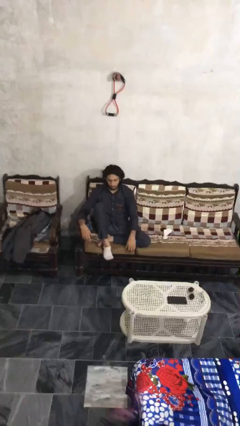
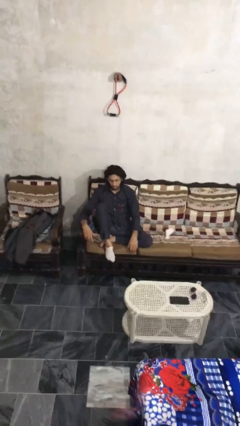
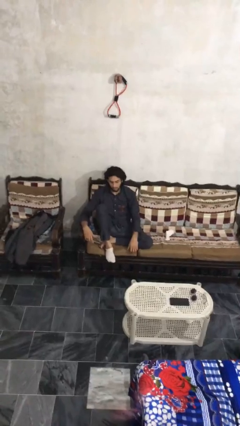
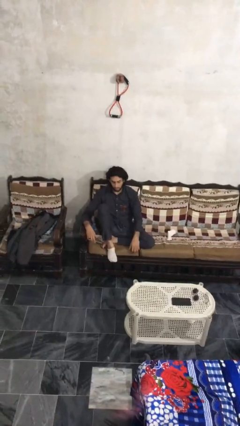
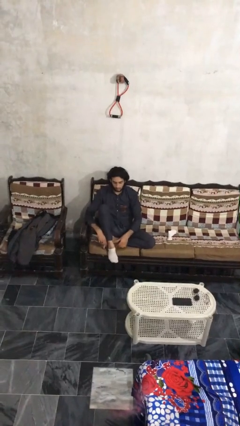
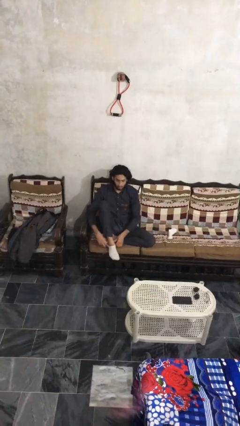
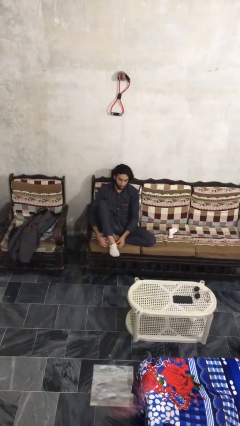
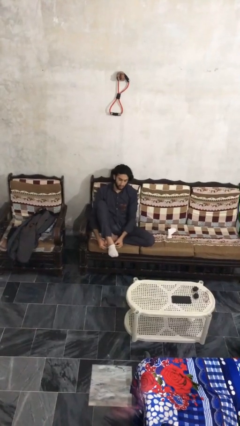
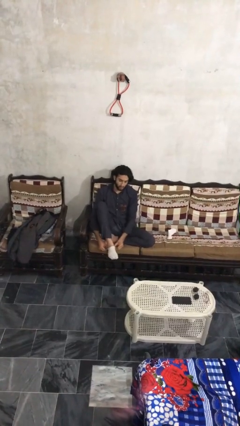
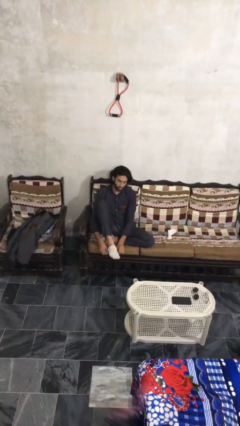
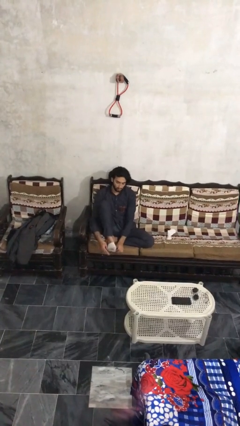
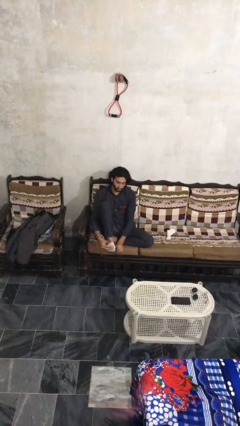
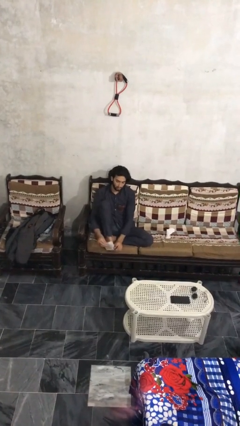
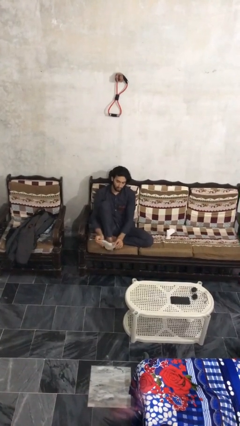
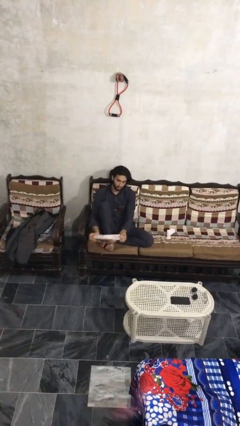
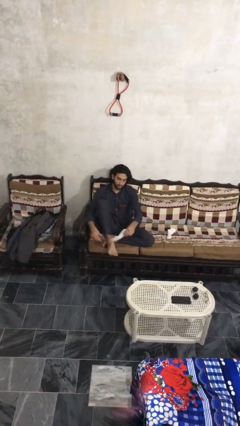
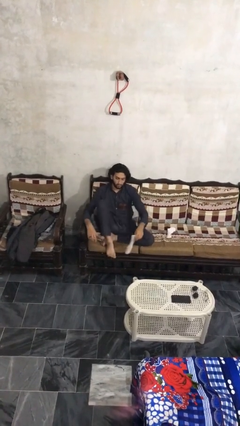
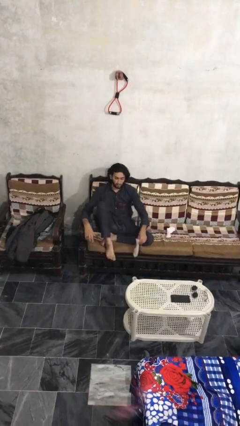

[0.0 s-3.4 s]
person takes off socks

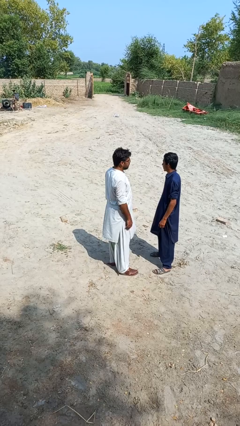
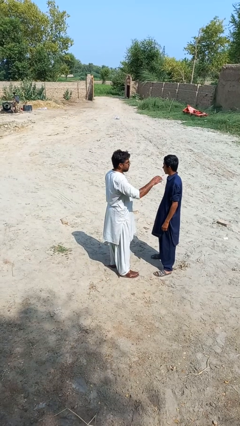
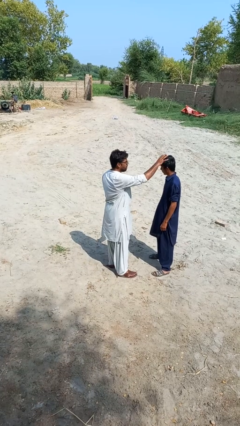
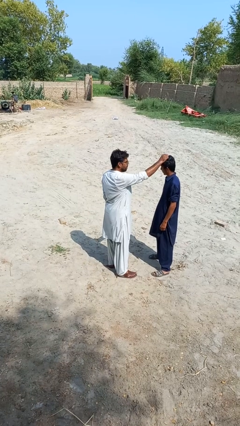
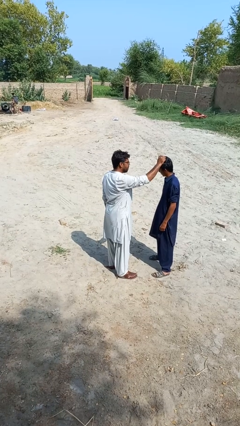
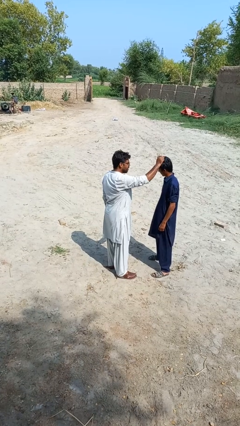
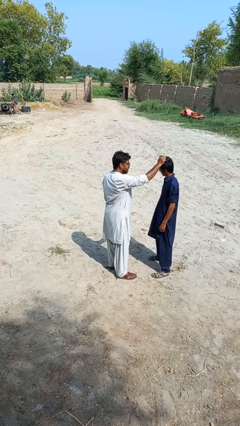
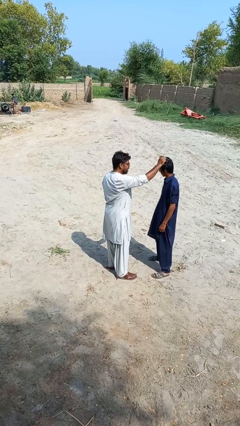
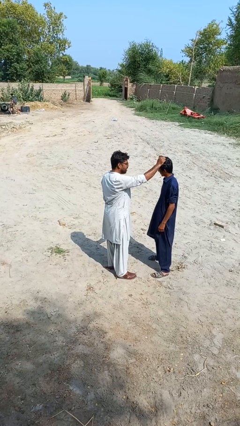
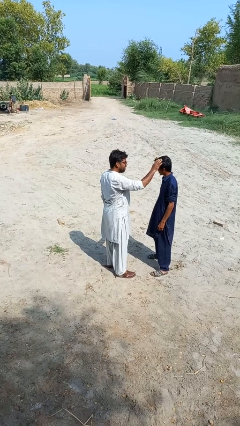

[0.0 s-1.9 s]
person grabs person by hair

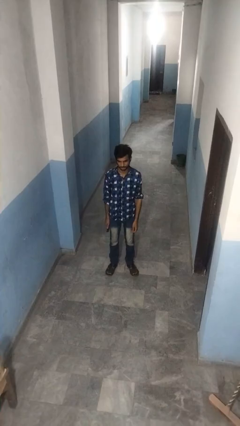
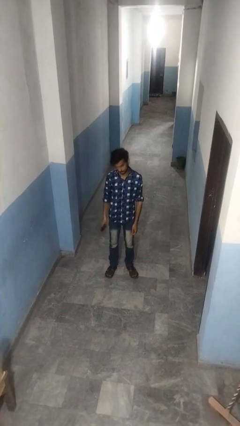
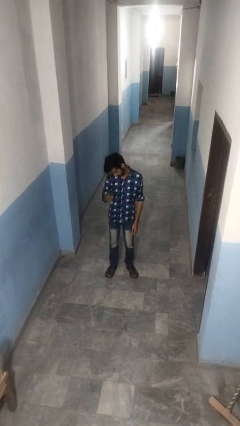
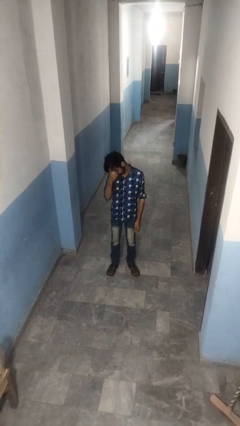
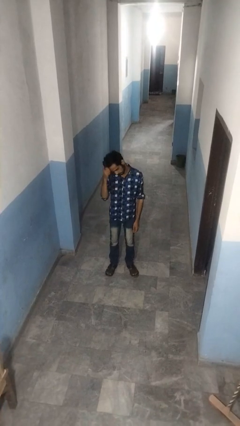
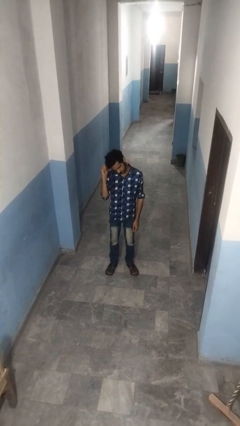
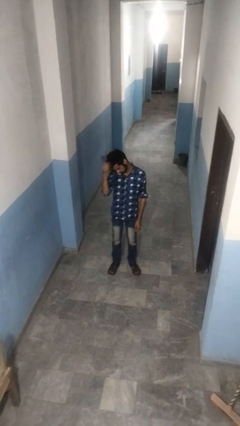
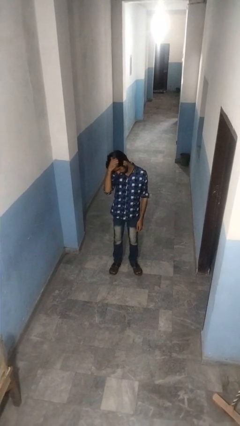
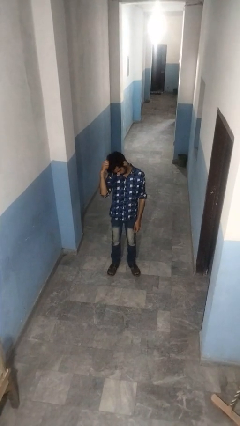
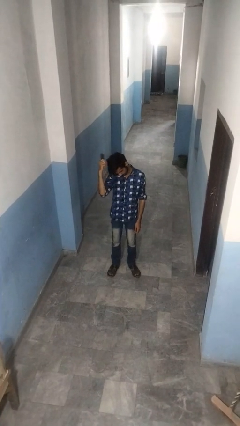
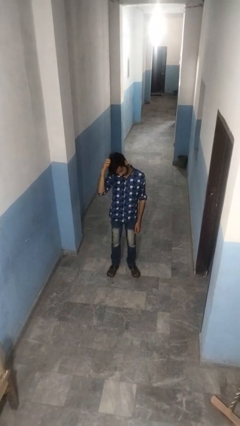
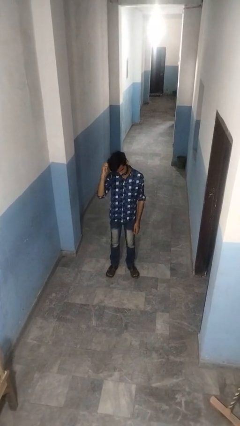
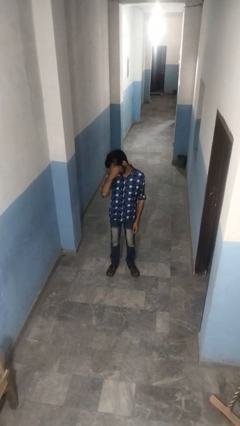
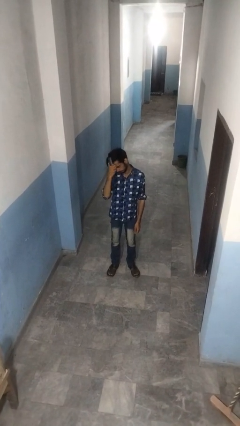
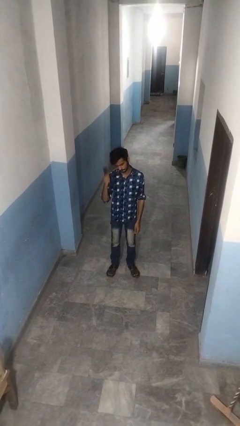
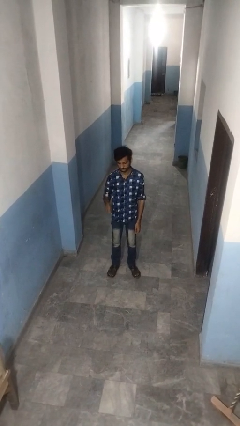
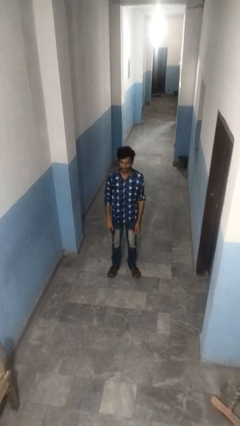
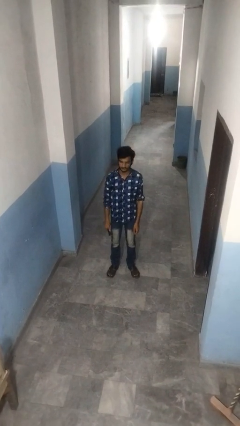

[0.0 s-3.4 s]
person brushes hair

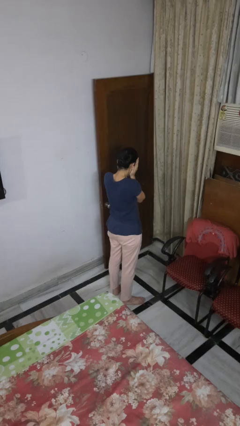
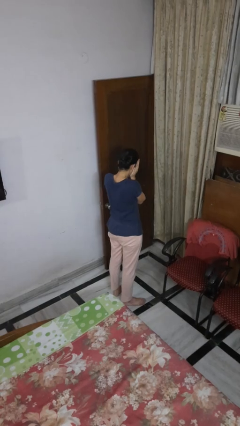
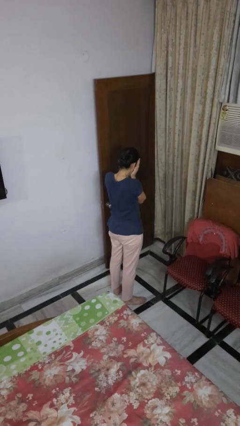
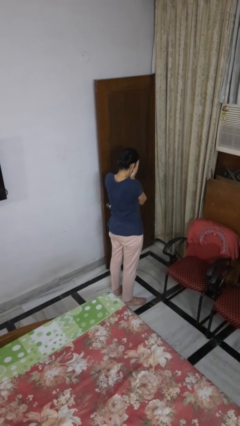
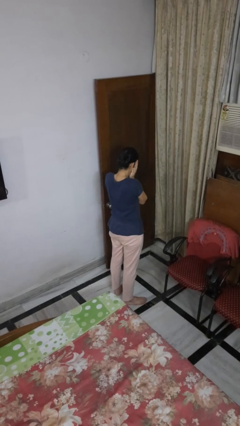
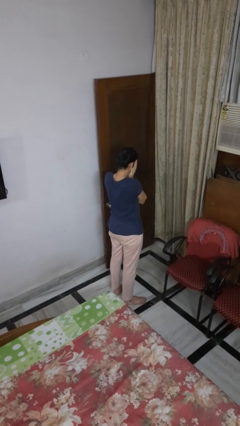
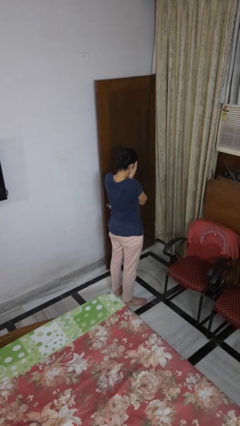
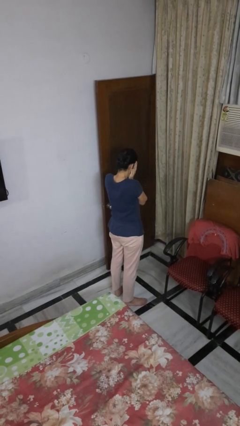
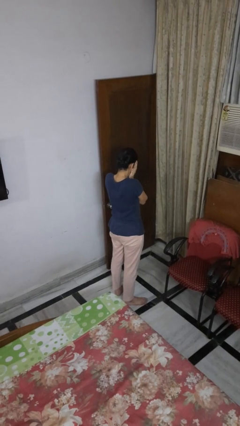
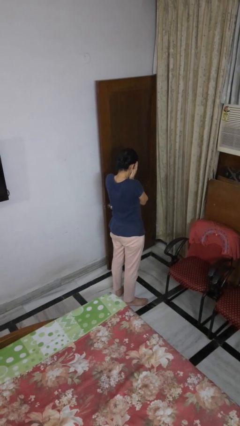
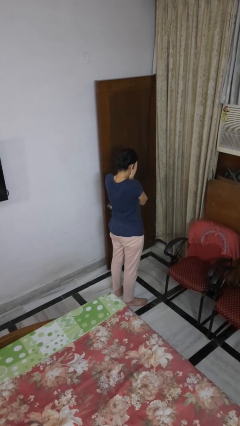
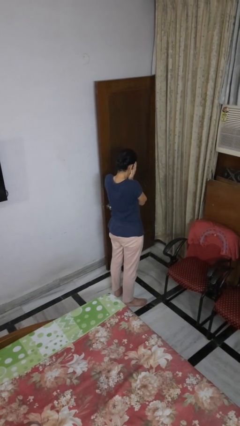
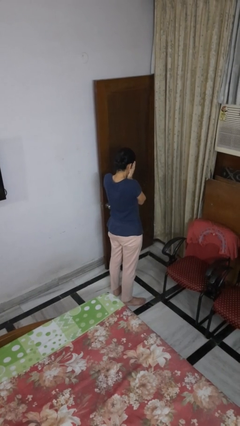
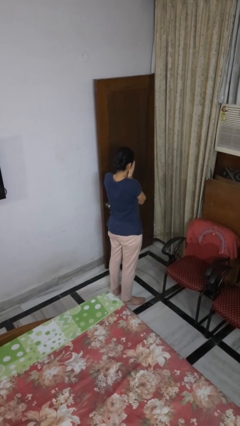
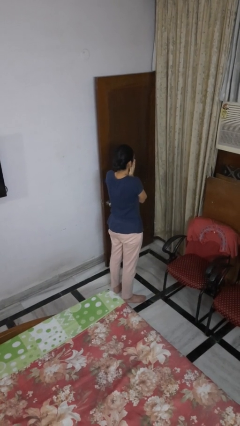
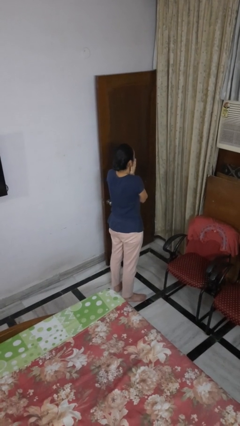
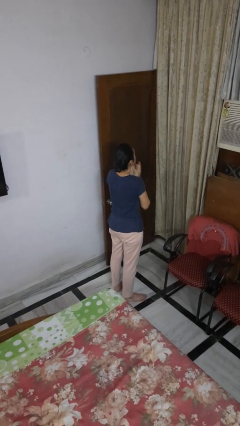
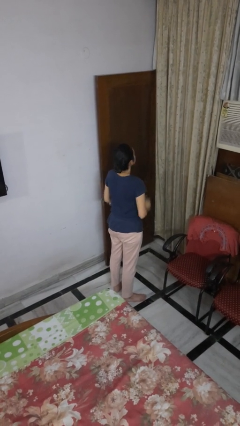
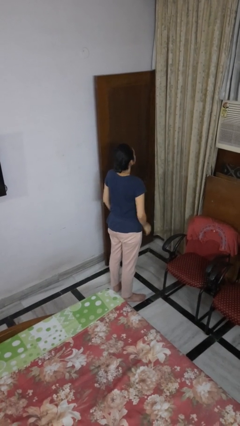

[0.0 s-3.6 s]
person covers face with hands

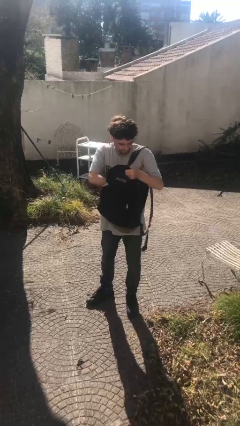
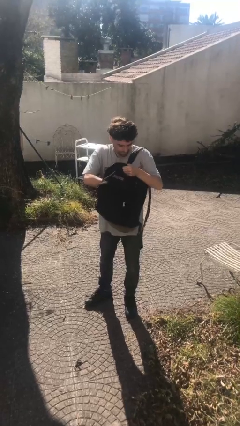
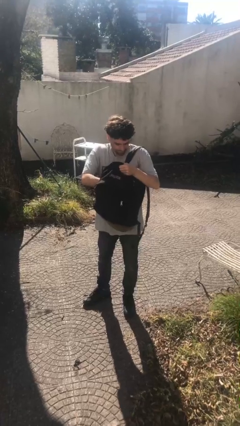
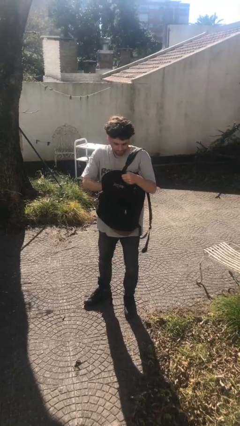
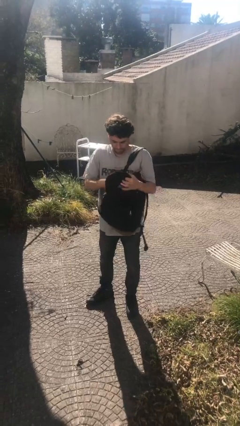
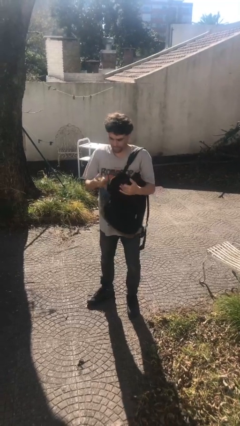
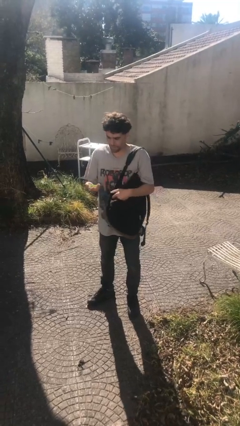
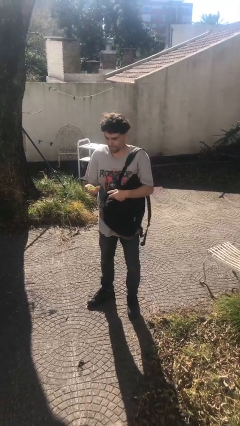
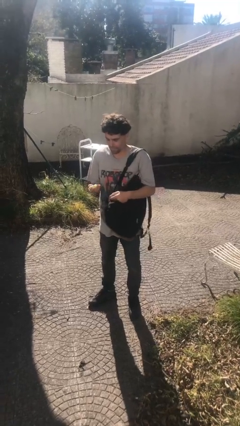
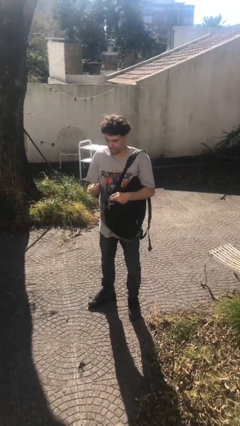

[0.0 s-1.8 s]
person takes object from backpack

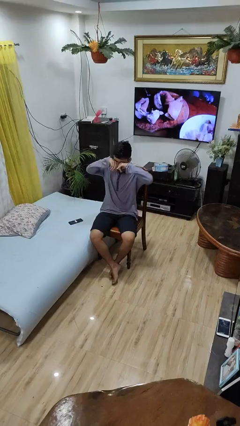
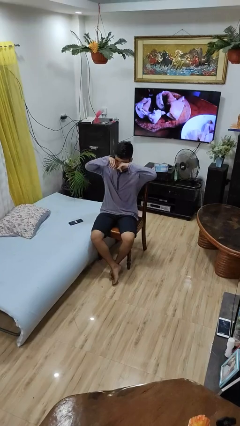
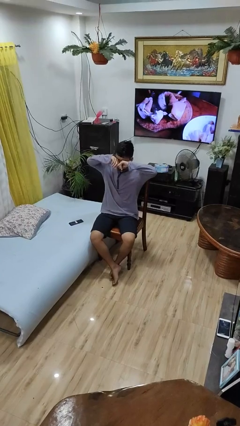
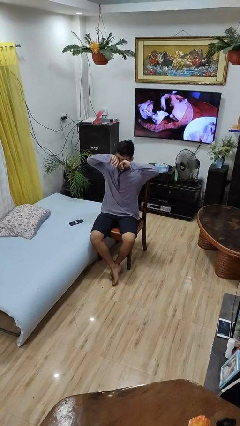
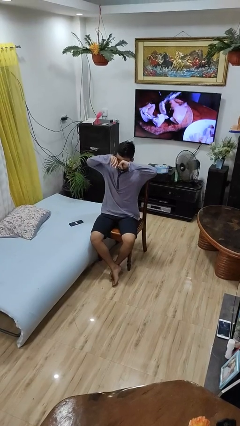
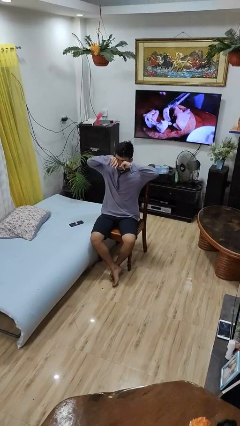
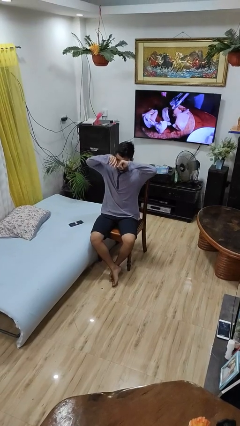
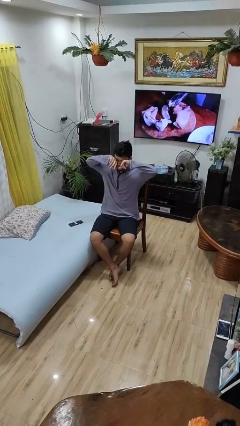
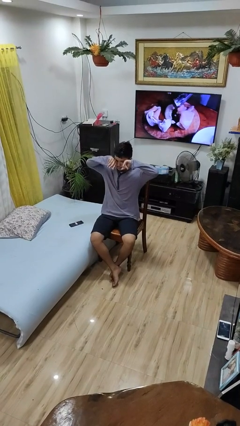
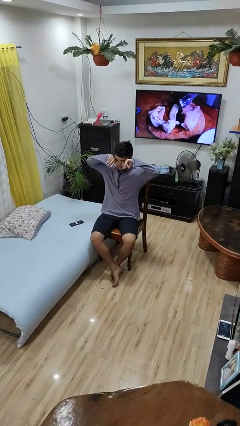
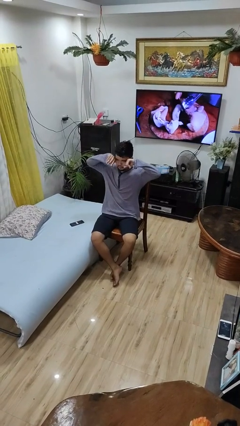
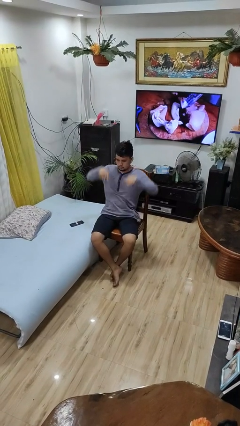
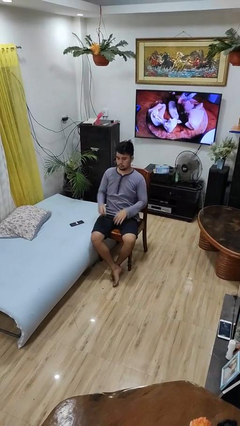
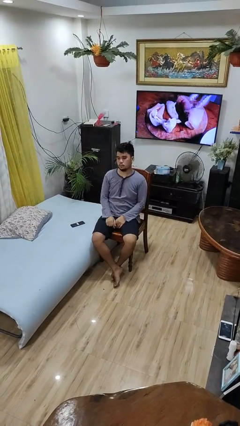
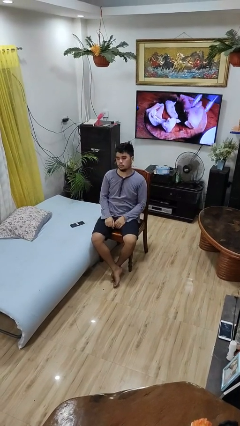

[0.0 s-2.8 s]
person rubs eyes
